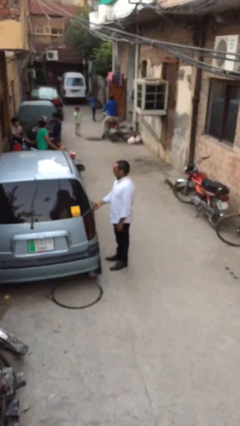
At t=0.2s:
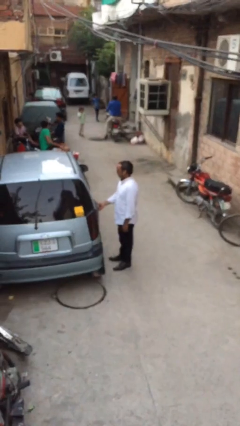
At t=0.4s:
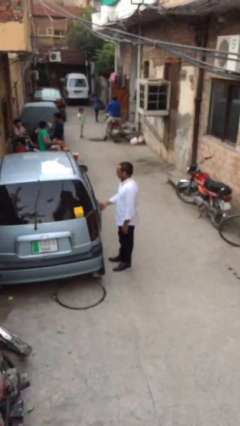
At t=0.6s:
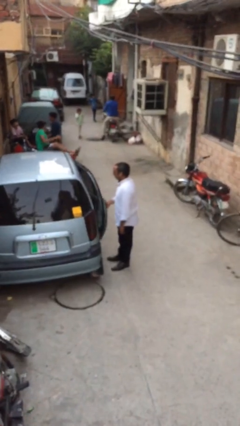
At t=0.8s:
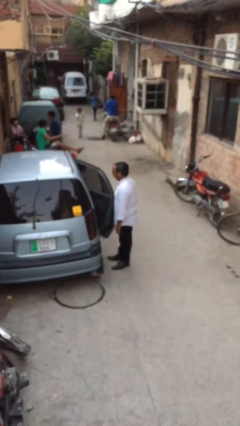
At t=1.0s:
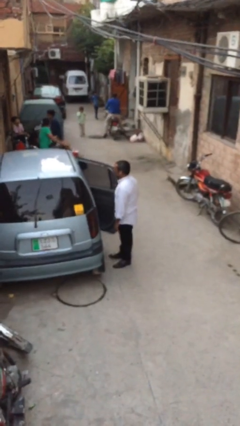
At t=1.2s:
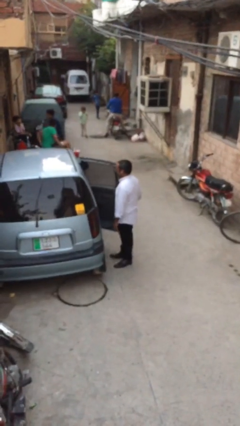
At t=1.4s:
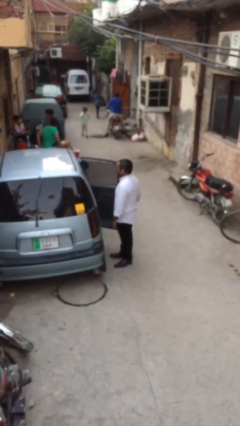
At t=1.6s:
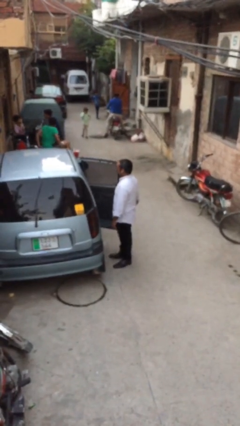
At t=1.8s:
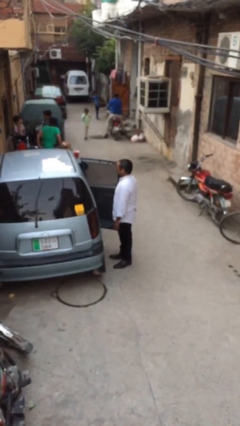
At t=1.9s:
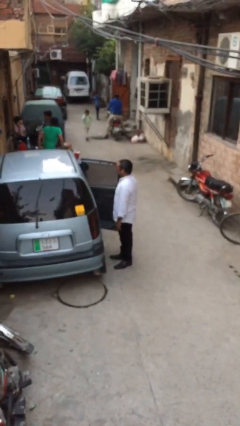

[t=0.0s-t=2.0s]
person opens car door

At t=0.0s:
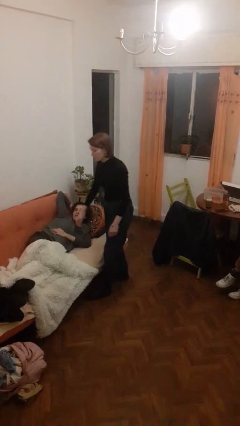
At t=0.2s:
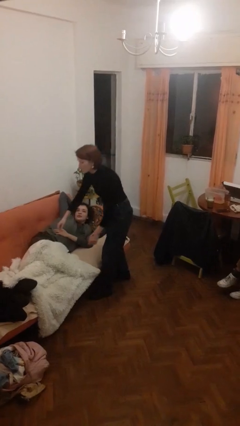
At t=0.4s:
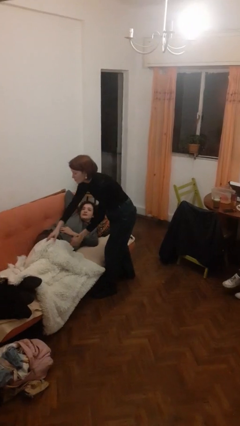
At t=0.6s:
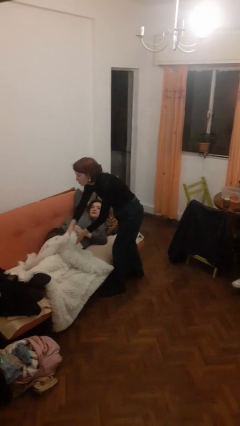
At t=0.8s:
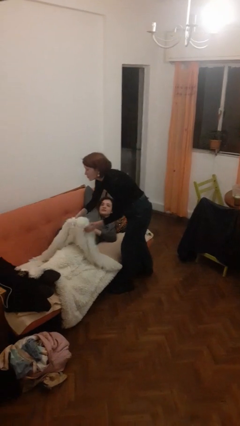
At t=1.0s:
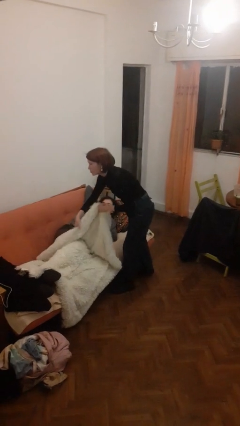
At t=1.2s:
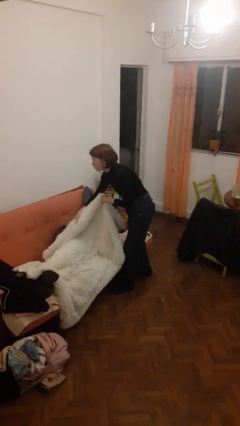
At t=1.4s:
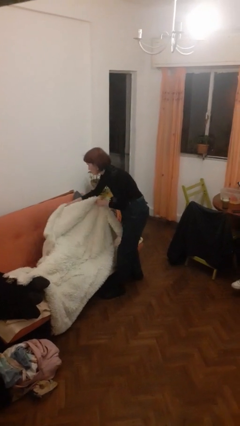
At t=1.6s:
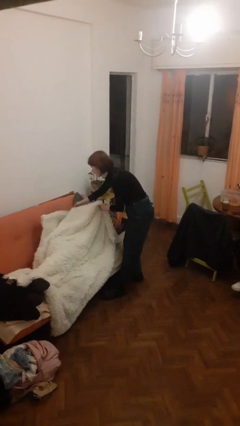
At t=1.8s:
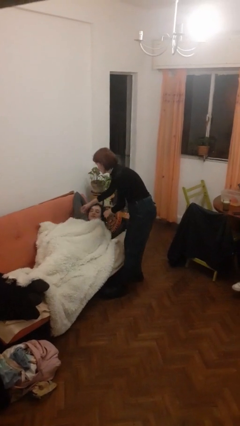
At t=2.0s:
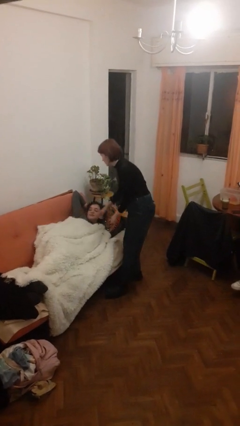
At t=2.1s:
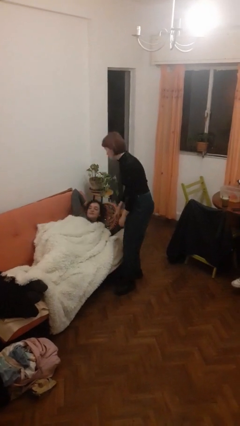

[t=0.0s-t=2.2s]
person covers friend with blanket

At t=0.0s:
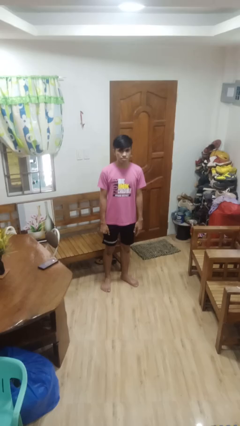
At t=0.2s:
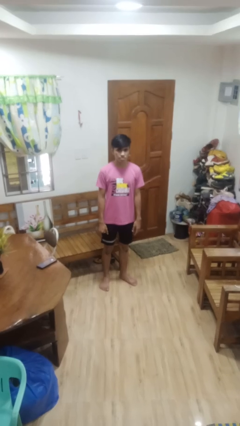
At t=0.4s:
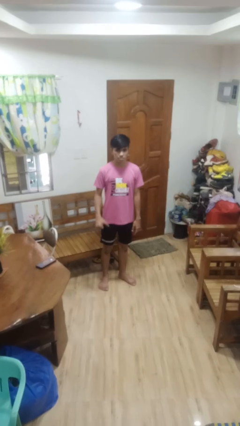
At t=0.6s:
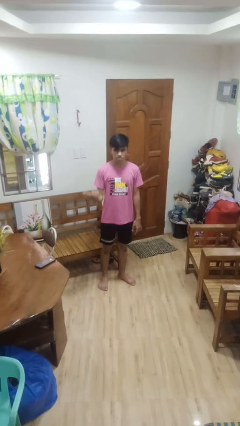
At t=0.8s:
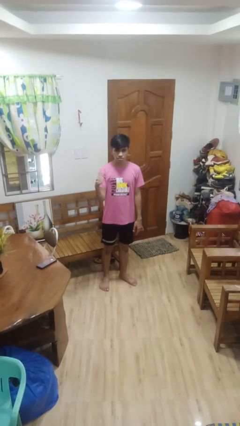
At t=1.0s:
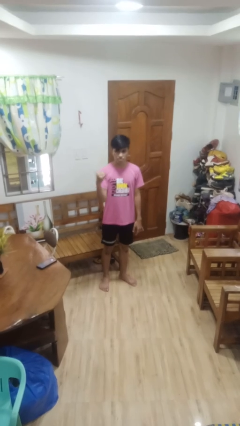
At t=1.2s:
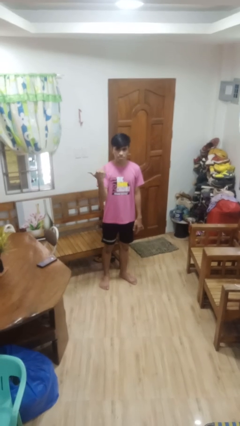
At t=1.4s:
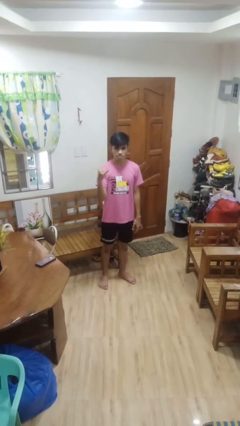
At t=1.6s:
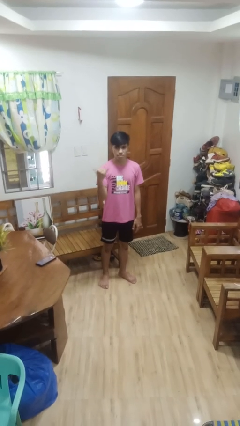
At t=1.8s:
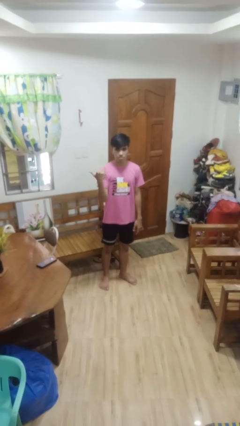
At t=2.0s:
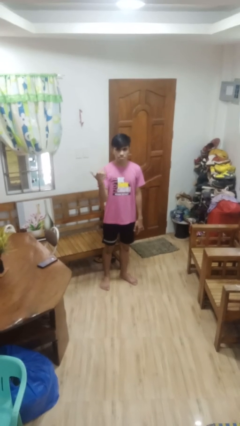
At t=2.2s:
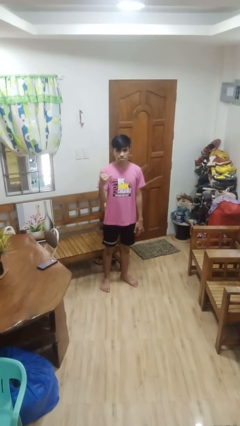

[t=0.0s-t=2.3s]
person gestures hang loose

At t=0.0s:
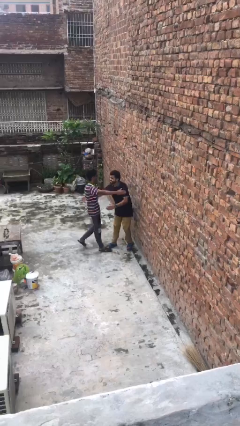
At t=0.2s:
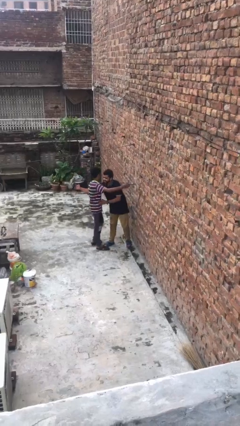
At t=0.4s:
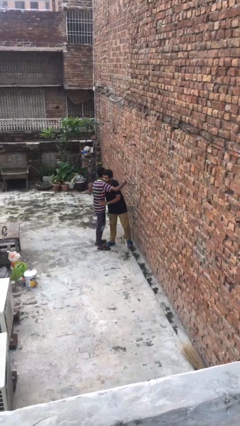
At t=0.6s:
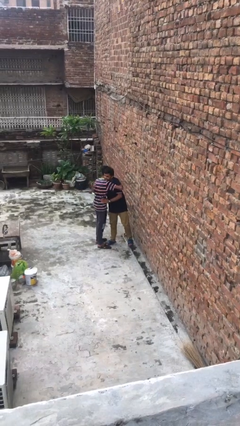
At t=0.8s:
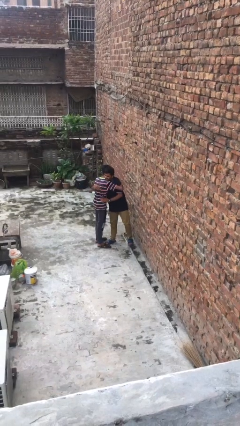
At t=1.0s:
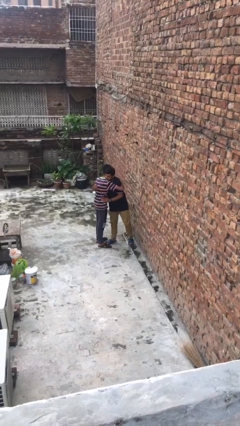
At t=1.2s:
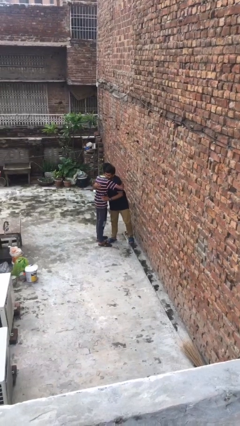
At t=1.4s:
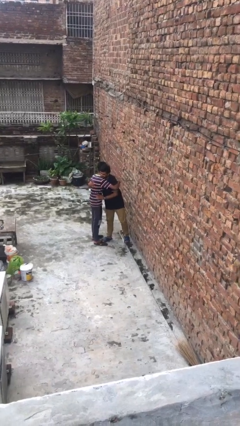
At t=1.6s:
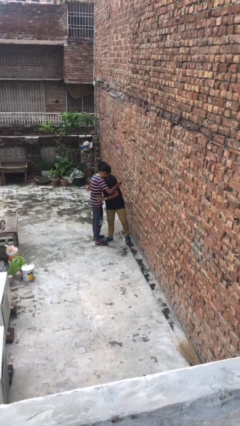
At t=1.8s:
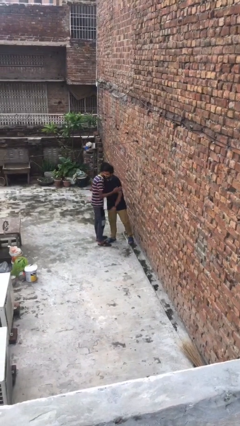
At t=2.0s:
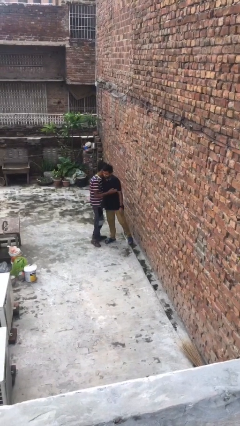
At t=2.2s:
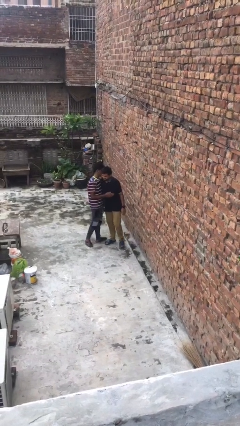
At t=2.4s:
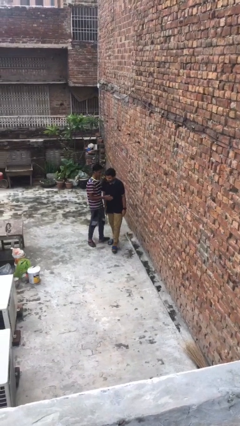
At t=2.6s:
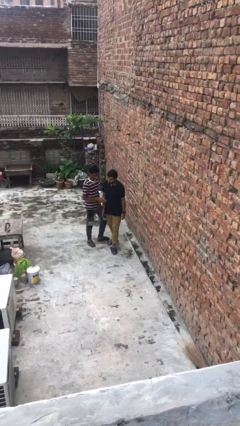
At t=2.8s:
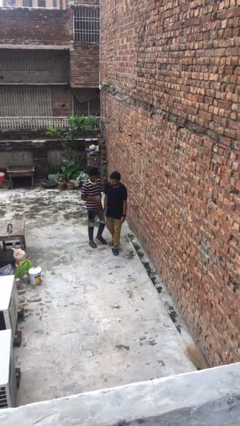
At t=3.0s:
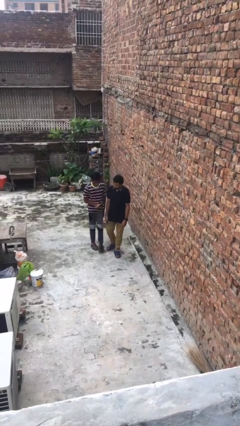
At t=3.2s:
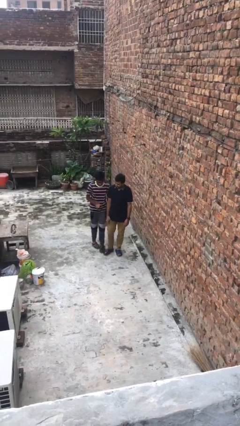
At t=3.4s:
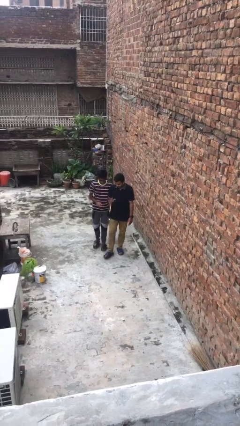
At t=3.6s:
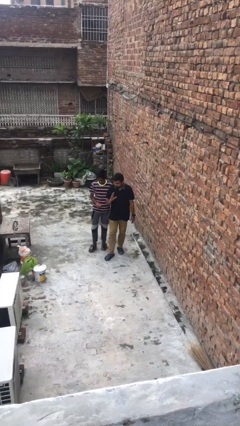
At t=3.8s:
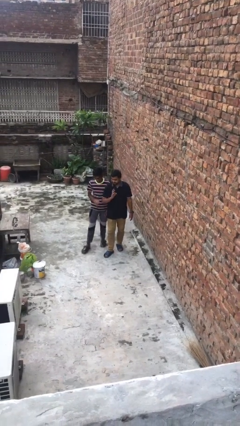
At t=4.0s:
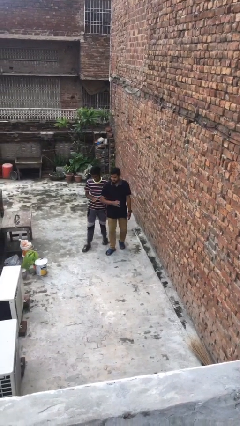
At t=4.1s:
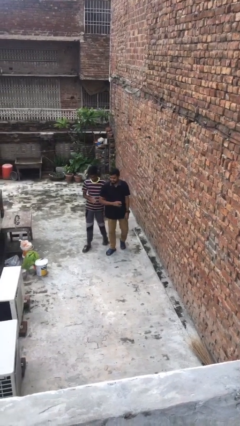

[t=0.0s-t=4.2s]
person embraces person

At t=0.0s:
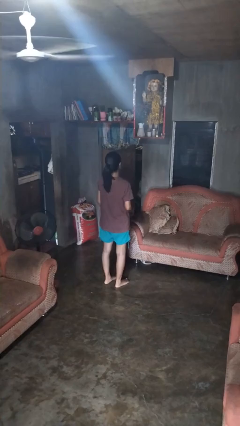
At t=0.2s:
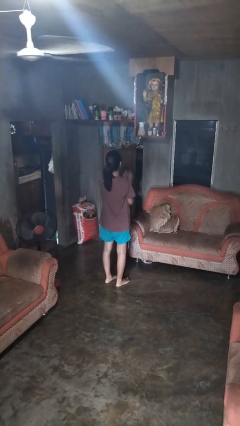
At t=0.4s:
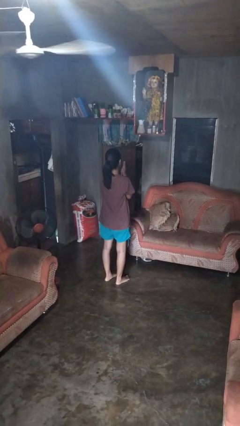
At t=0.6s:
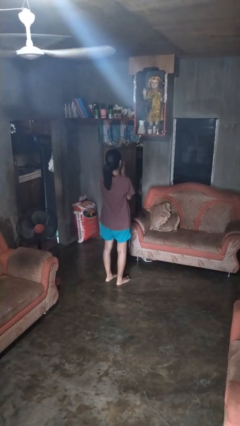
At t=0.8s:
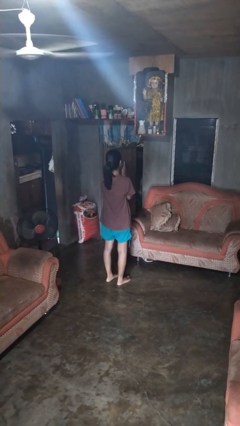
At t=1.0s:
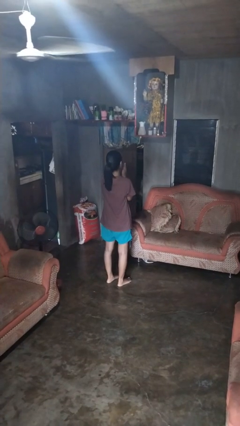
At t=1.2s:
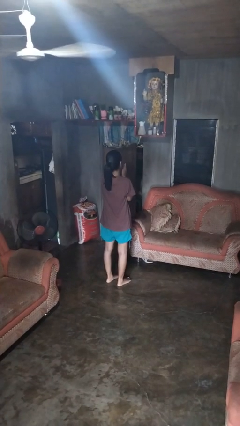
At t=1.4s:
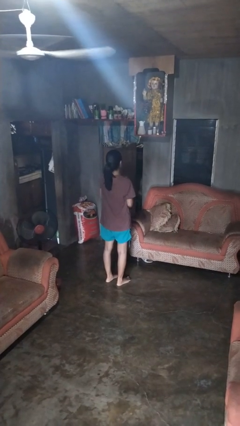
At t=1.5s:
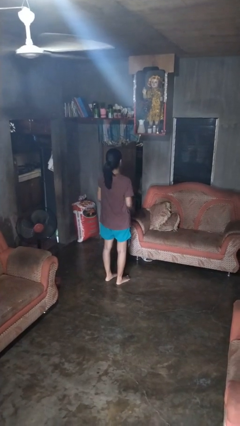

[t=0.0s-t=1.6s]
person prays

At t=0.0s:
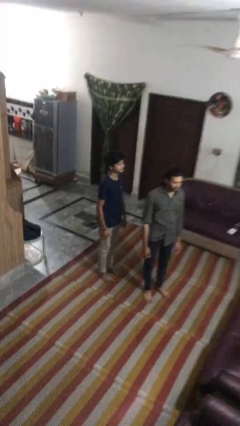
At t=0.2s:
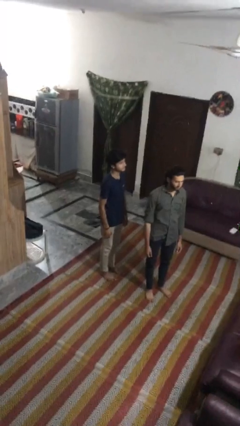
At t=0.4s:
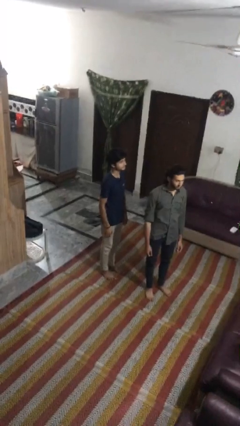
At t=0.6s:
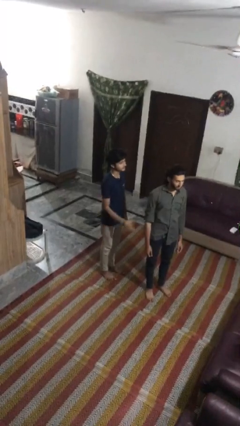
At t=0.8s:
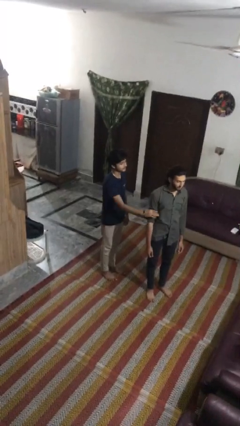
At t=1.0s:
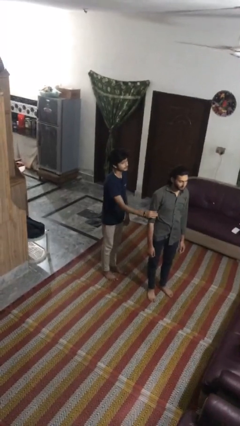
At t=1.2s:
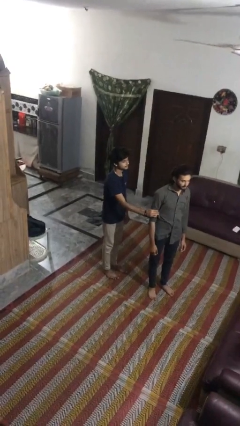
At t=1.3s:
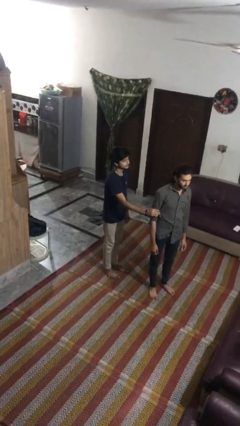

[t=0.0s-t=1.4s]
person grabs person by shoulder

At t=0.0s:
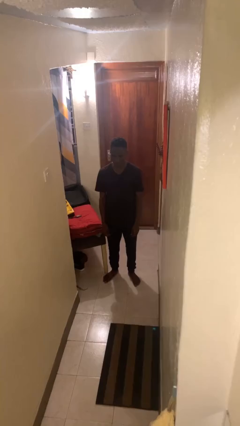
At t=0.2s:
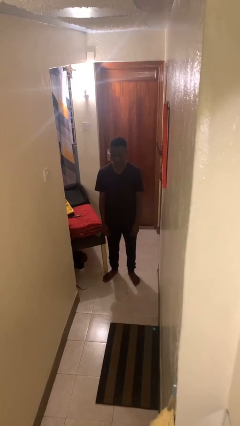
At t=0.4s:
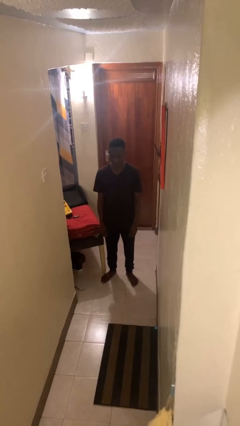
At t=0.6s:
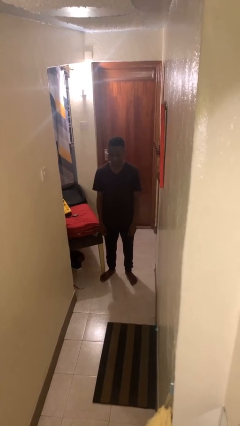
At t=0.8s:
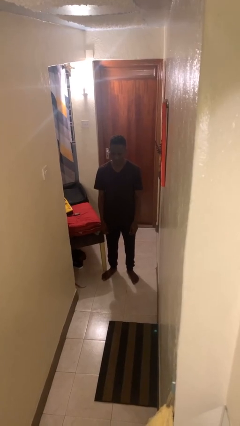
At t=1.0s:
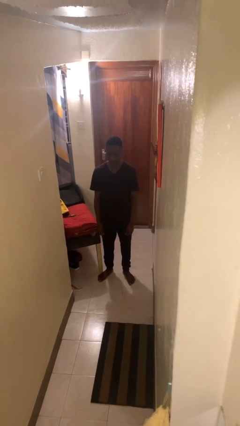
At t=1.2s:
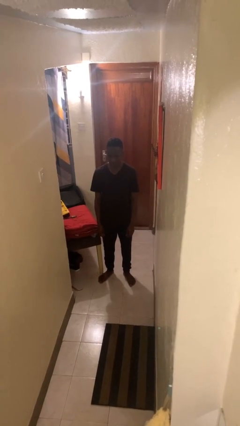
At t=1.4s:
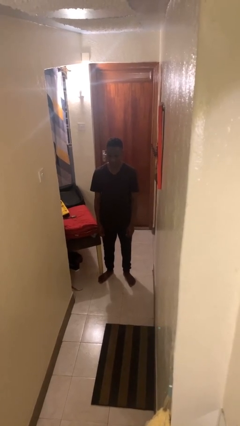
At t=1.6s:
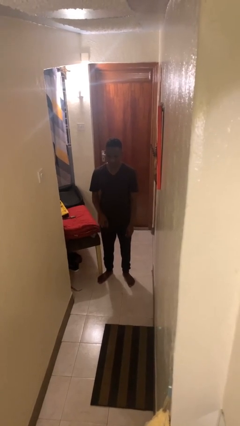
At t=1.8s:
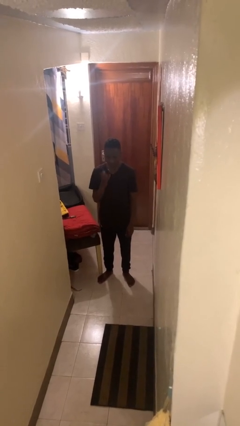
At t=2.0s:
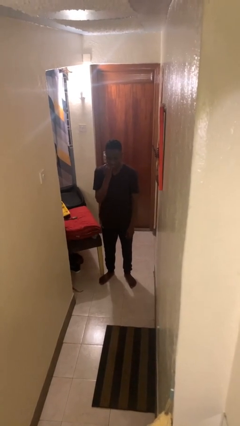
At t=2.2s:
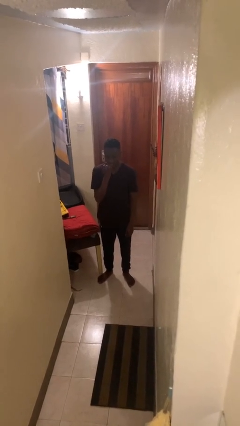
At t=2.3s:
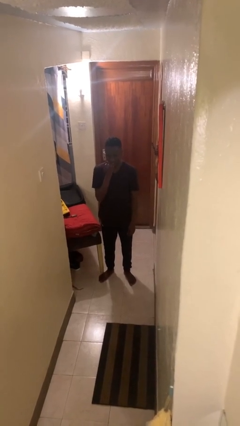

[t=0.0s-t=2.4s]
person licks fingers

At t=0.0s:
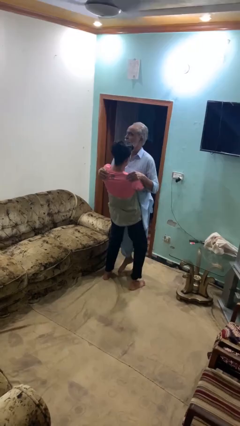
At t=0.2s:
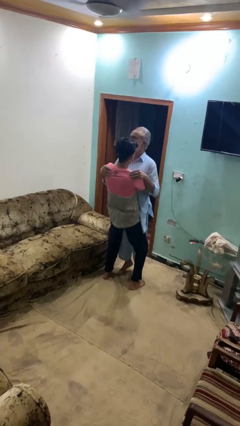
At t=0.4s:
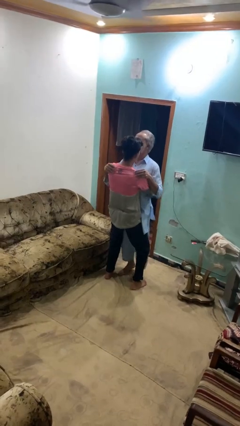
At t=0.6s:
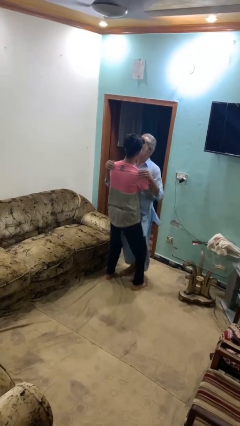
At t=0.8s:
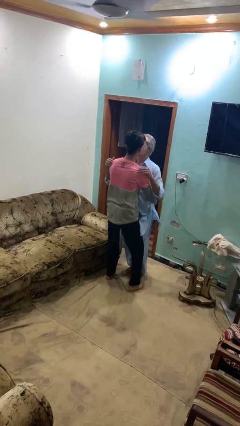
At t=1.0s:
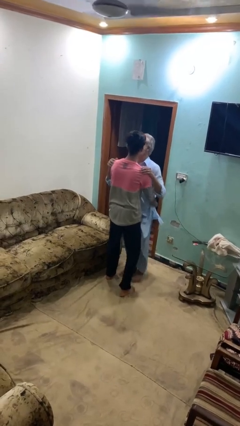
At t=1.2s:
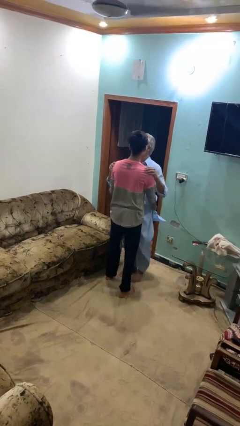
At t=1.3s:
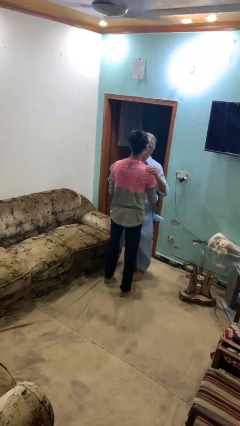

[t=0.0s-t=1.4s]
person puts down person
